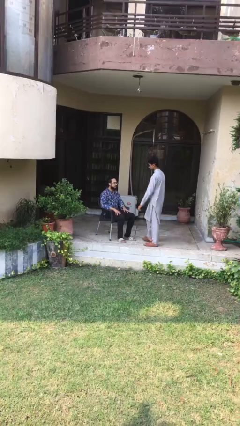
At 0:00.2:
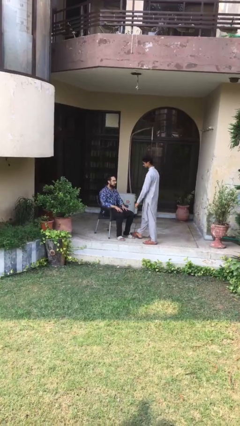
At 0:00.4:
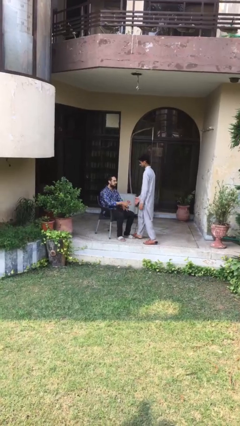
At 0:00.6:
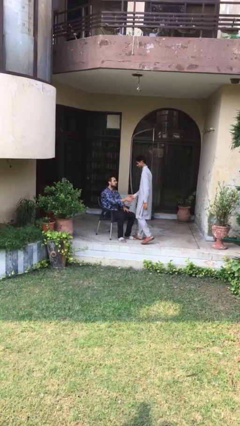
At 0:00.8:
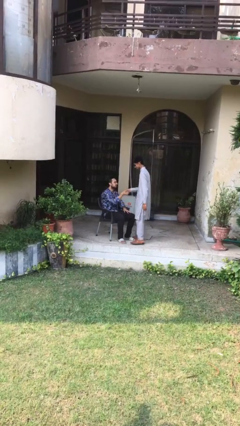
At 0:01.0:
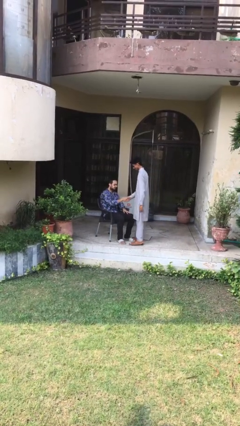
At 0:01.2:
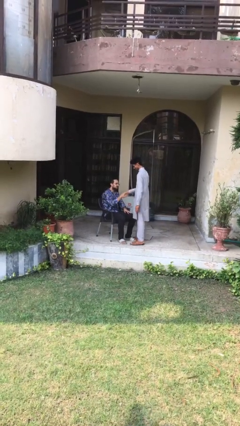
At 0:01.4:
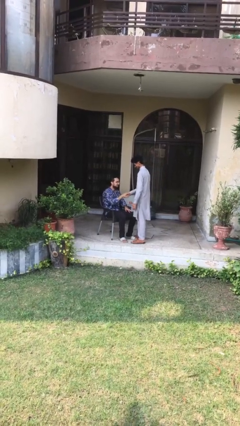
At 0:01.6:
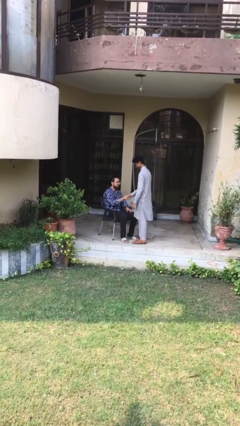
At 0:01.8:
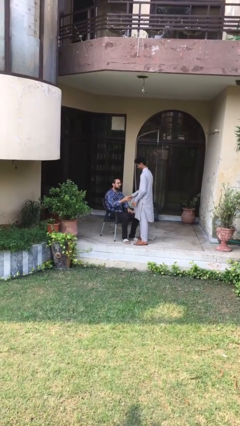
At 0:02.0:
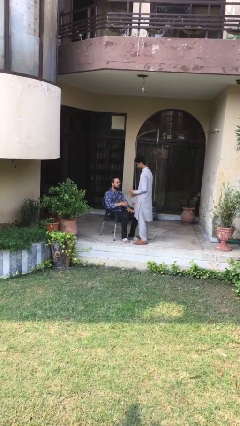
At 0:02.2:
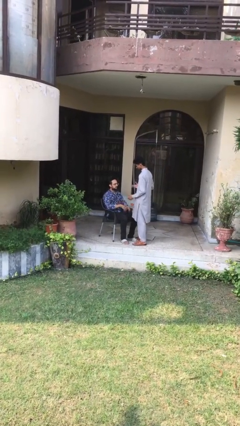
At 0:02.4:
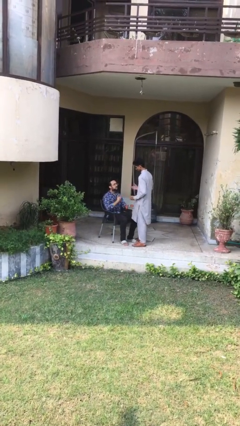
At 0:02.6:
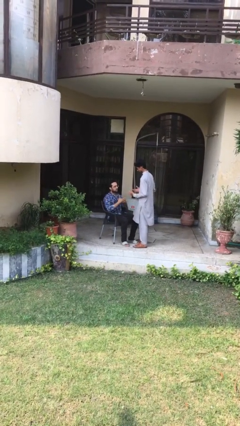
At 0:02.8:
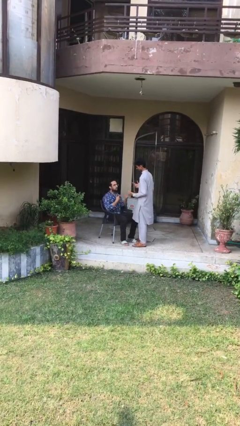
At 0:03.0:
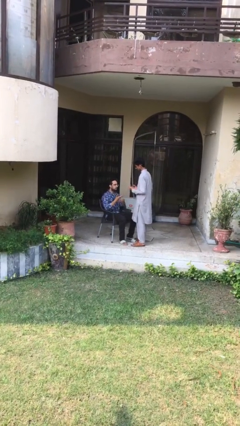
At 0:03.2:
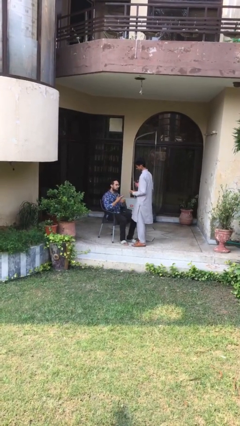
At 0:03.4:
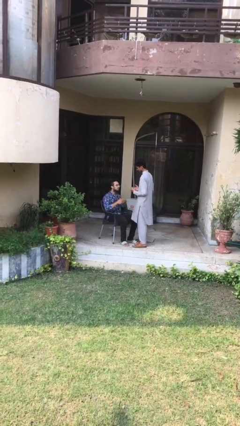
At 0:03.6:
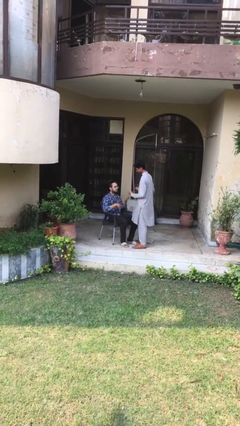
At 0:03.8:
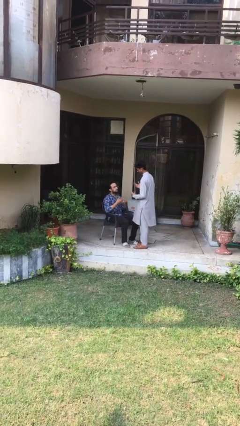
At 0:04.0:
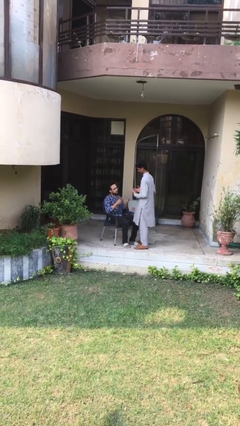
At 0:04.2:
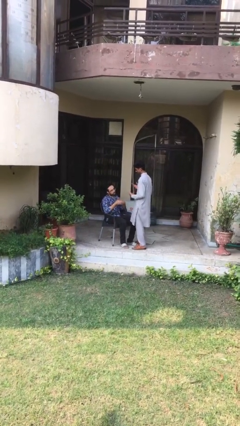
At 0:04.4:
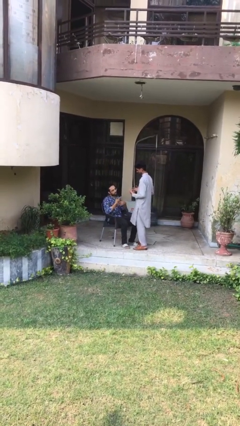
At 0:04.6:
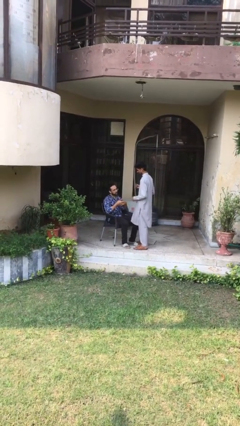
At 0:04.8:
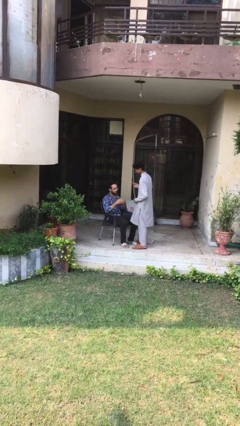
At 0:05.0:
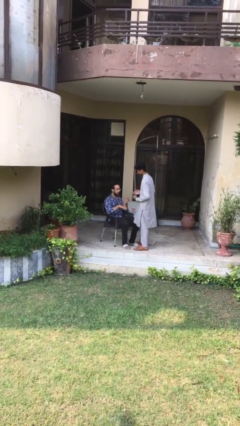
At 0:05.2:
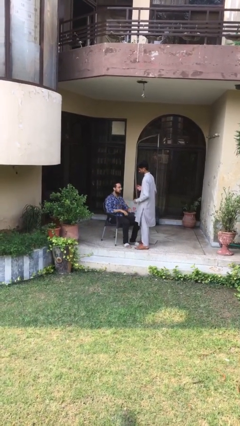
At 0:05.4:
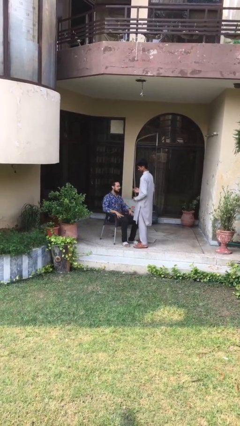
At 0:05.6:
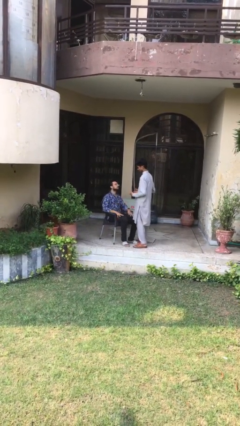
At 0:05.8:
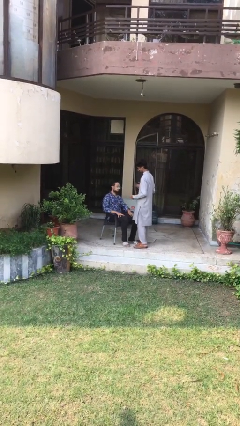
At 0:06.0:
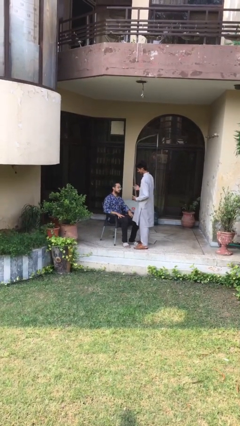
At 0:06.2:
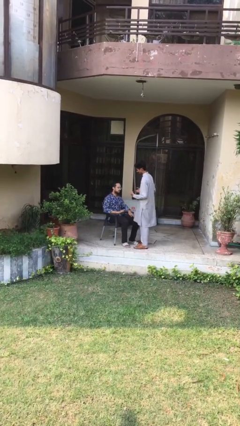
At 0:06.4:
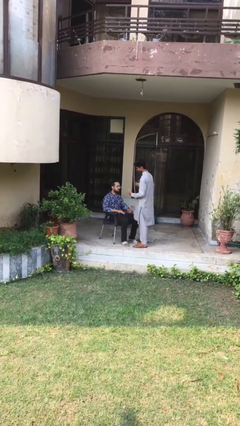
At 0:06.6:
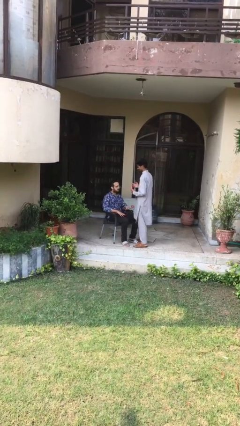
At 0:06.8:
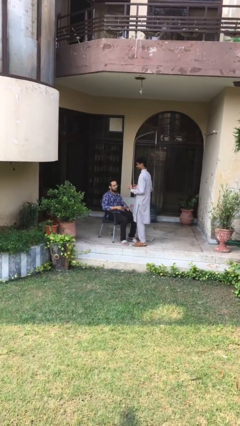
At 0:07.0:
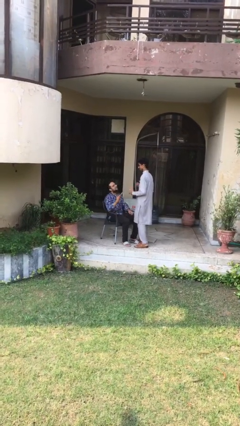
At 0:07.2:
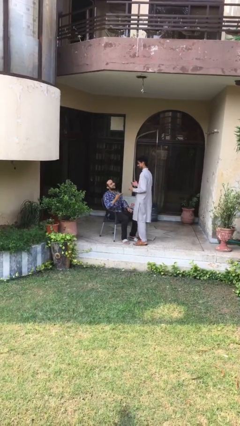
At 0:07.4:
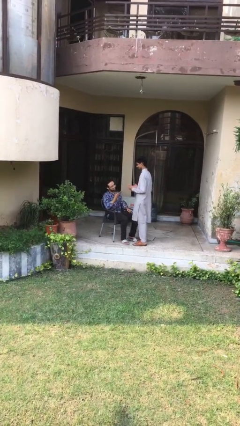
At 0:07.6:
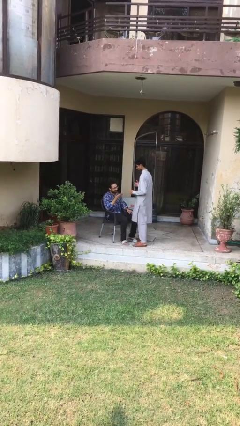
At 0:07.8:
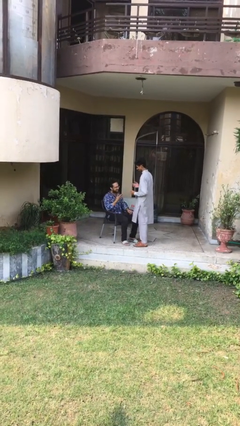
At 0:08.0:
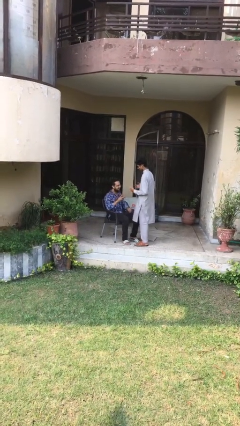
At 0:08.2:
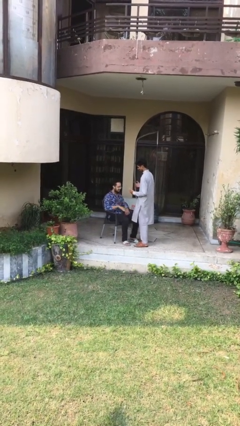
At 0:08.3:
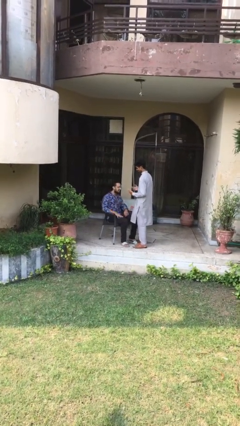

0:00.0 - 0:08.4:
person shakes hand

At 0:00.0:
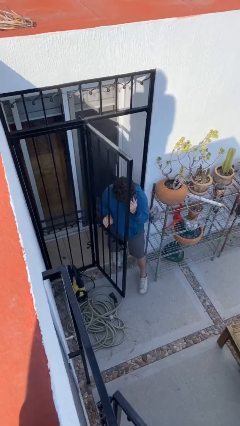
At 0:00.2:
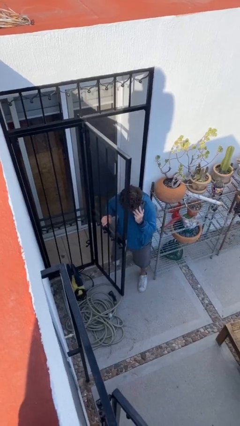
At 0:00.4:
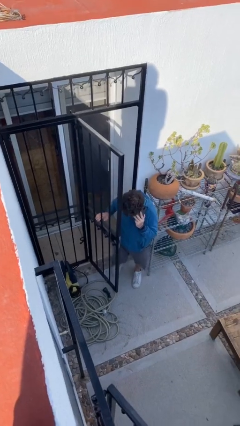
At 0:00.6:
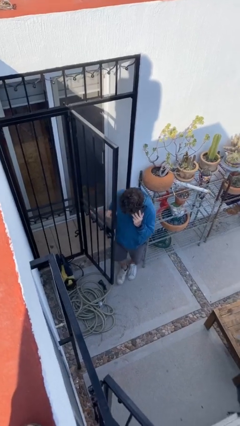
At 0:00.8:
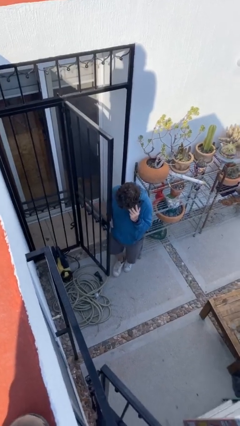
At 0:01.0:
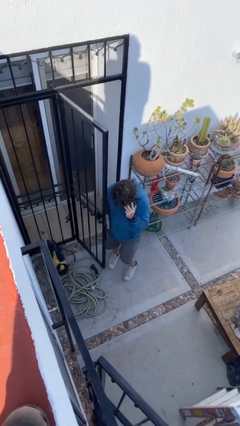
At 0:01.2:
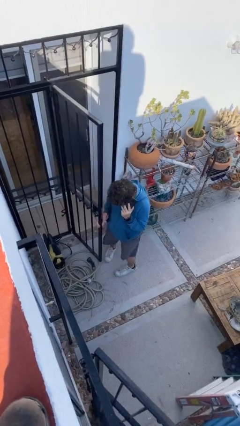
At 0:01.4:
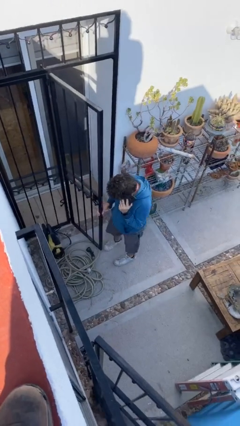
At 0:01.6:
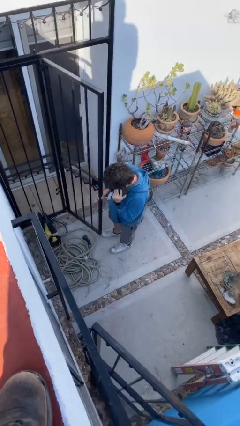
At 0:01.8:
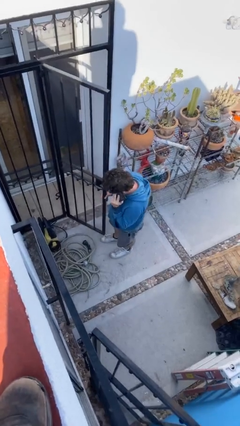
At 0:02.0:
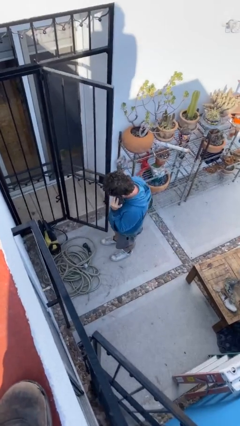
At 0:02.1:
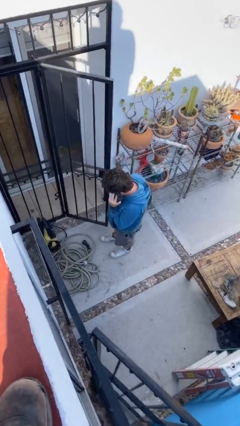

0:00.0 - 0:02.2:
person enters scene through structure

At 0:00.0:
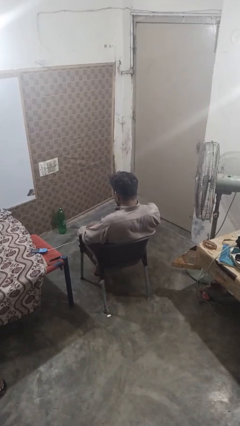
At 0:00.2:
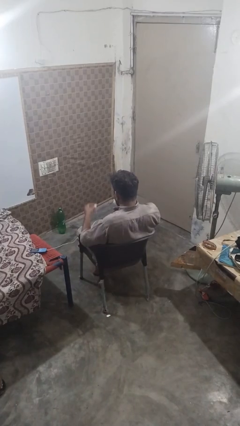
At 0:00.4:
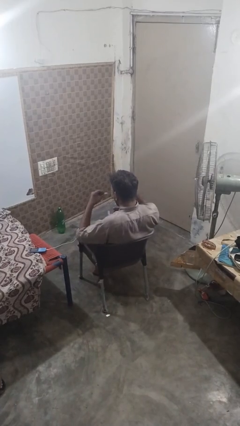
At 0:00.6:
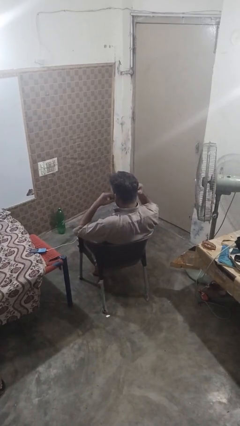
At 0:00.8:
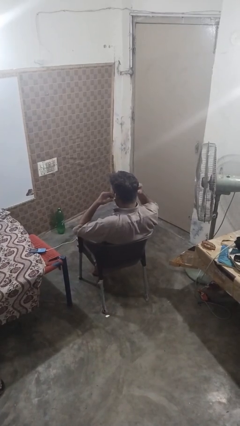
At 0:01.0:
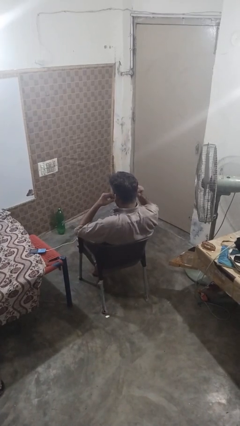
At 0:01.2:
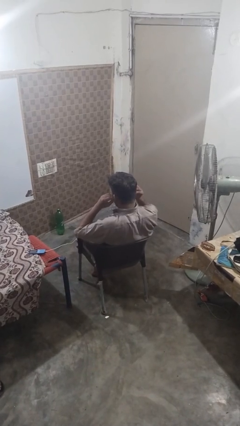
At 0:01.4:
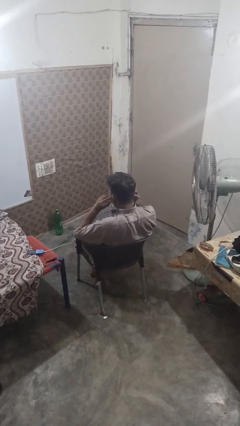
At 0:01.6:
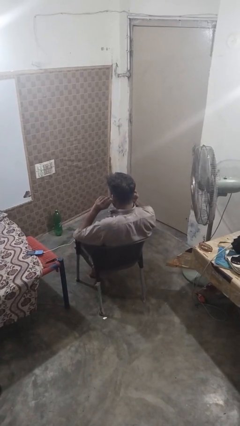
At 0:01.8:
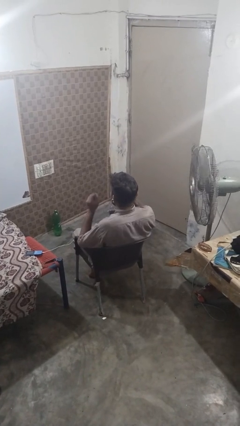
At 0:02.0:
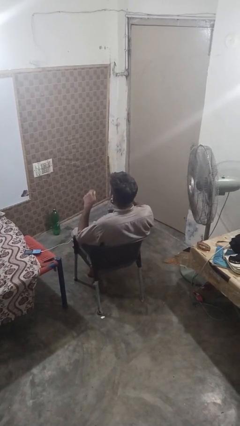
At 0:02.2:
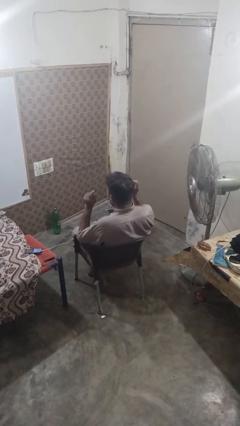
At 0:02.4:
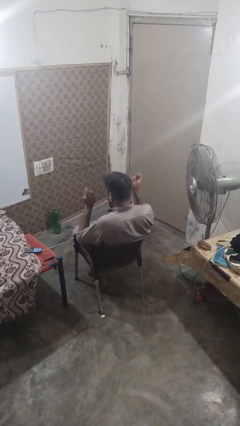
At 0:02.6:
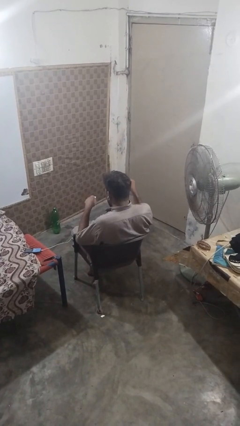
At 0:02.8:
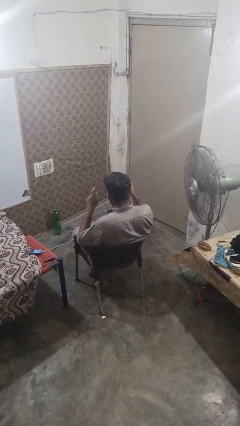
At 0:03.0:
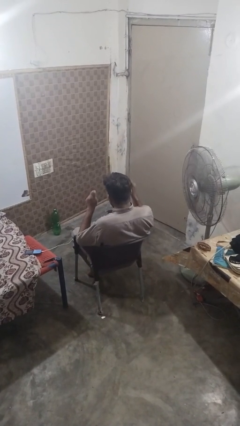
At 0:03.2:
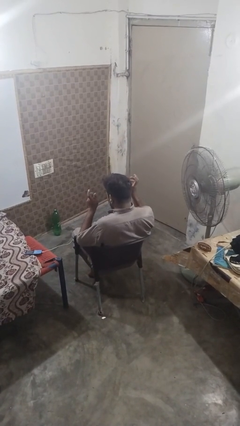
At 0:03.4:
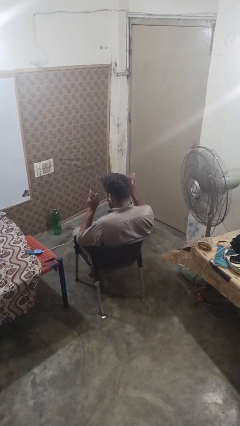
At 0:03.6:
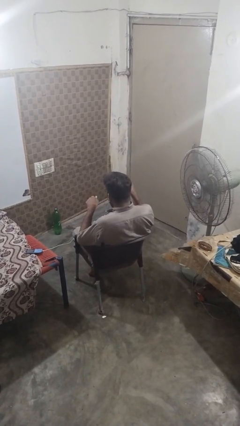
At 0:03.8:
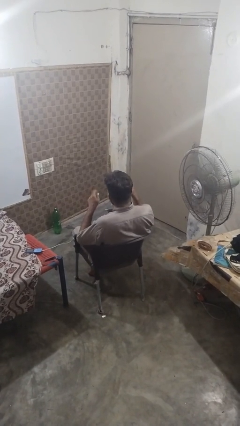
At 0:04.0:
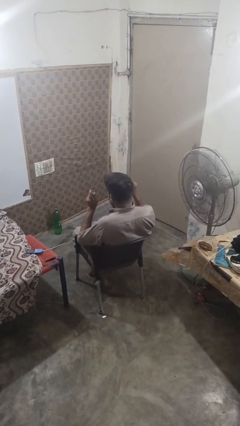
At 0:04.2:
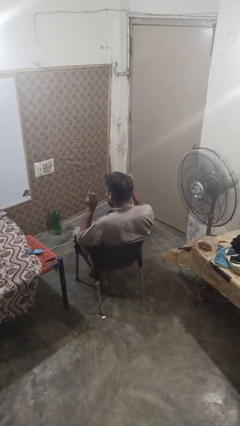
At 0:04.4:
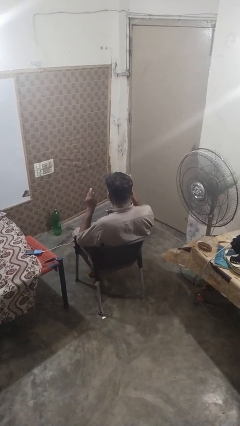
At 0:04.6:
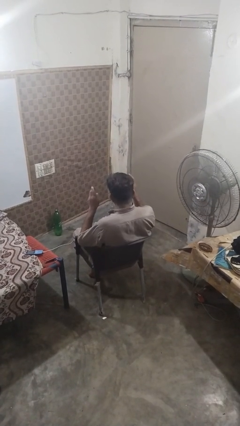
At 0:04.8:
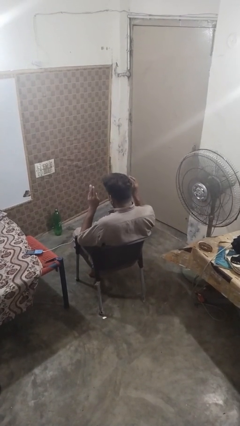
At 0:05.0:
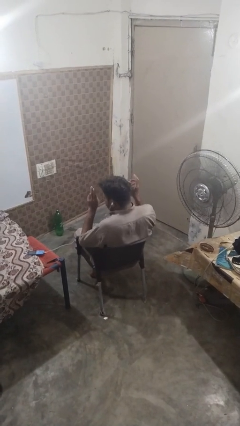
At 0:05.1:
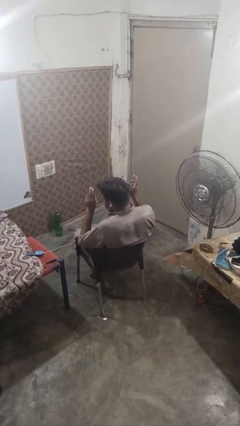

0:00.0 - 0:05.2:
person puts on headphones

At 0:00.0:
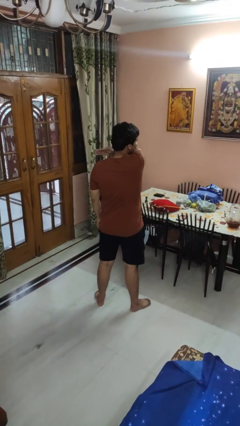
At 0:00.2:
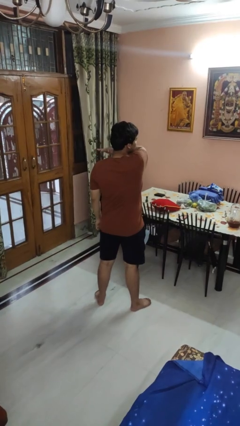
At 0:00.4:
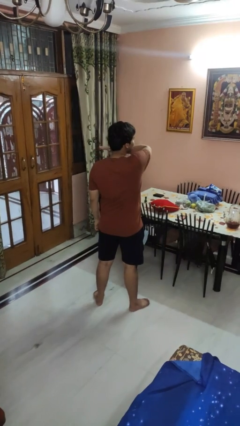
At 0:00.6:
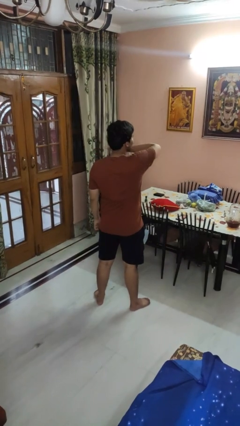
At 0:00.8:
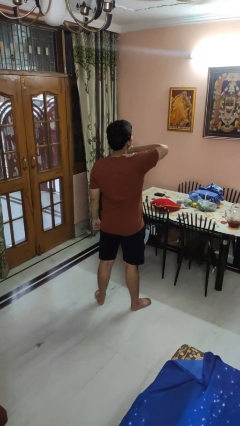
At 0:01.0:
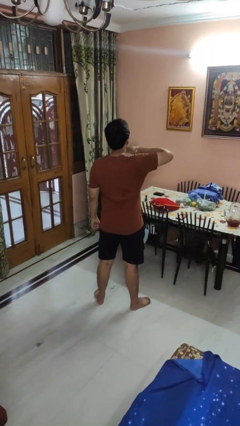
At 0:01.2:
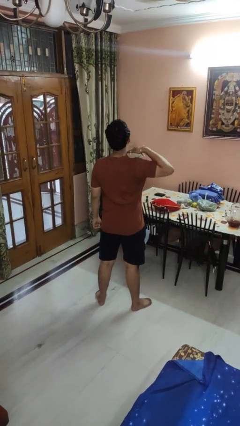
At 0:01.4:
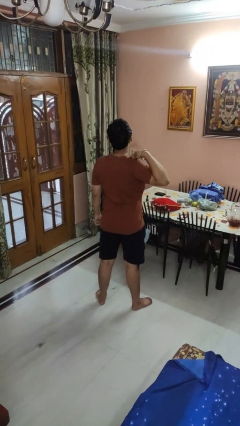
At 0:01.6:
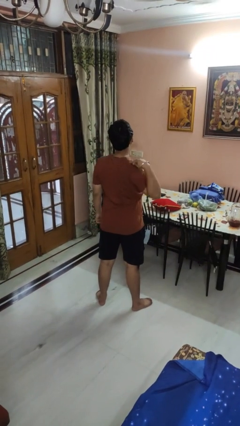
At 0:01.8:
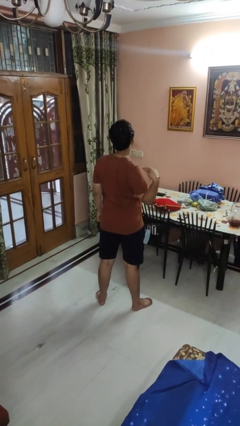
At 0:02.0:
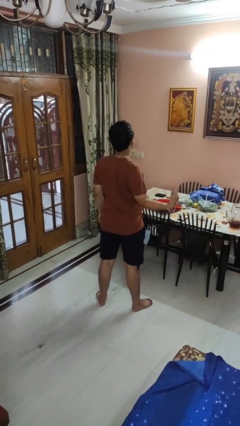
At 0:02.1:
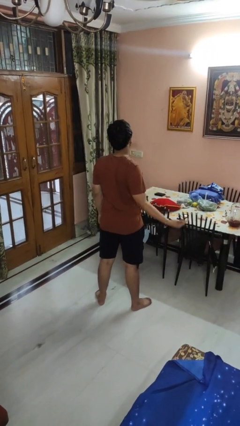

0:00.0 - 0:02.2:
person gestures cut
